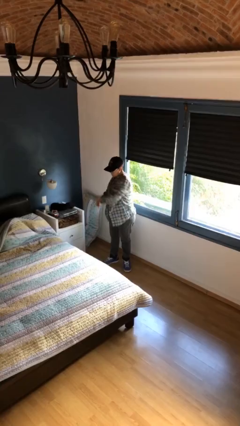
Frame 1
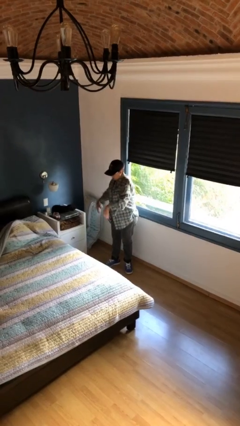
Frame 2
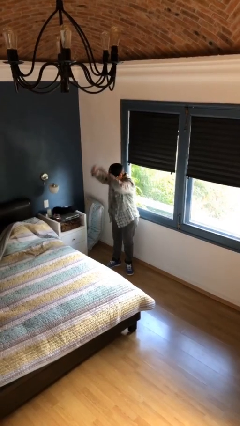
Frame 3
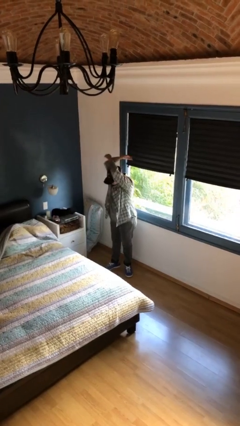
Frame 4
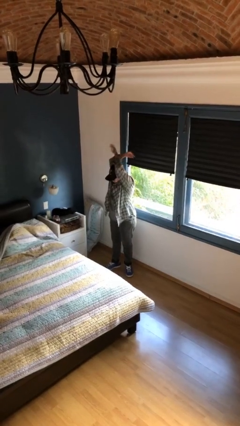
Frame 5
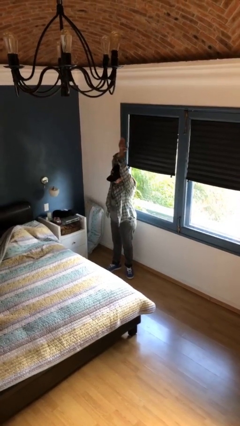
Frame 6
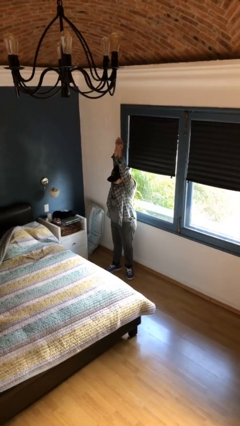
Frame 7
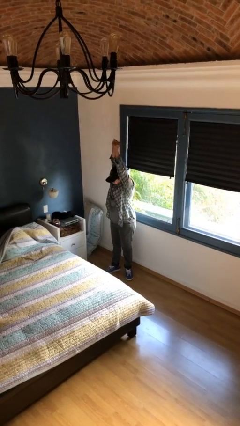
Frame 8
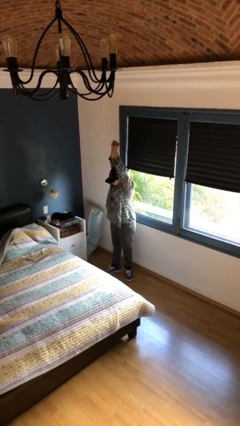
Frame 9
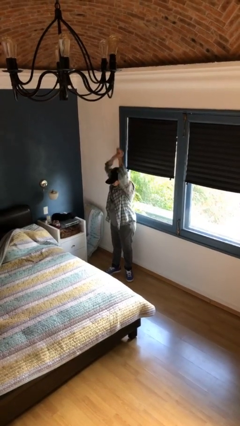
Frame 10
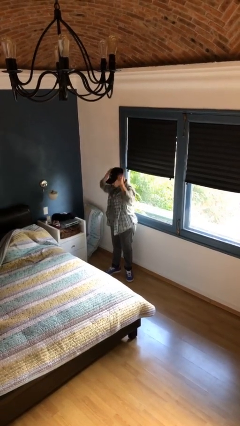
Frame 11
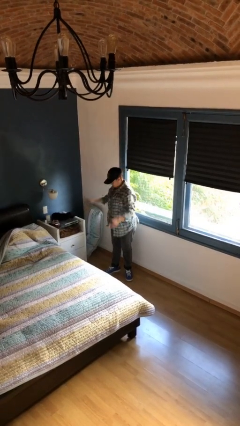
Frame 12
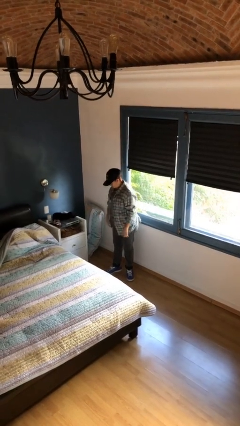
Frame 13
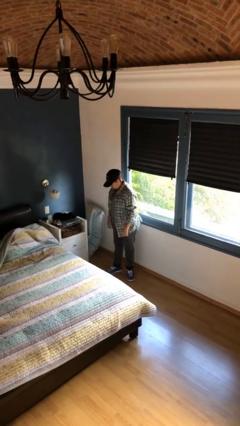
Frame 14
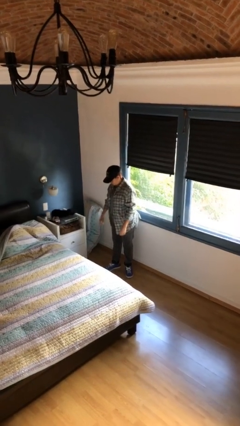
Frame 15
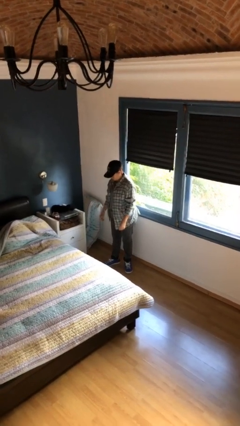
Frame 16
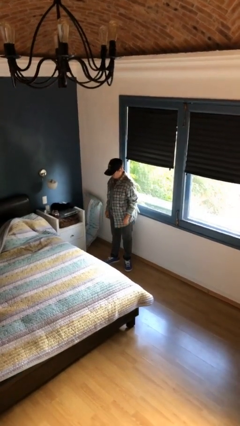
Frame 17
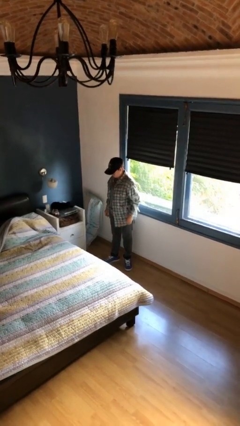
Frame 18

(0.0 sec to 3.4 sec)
person stretches arms over head

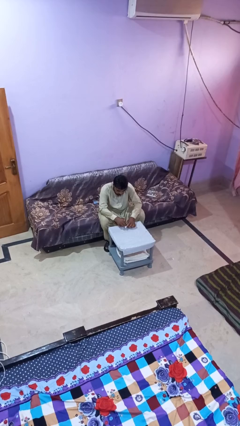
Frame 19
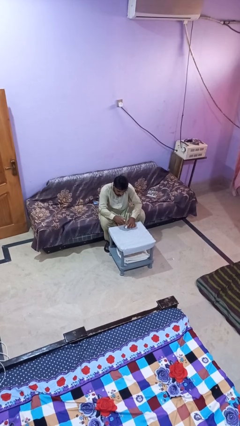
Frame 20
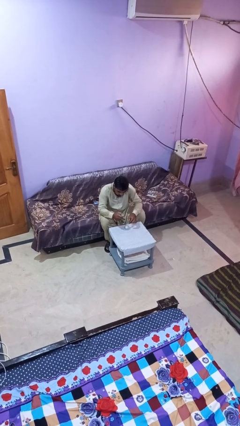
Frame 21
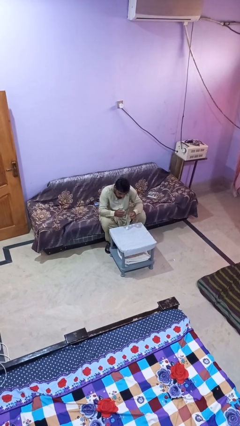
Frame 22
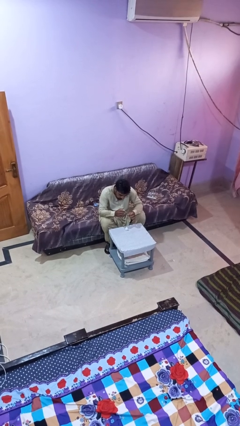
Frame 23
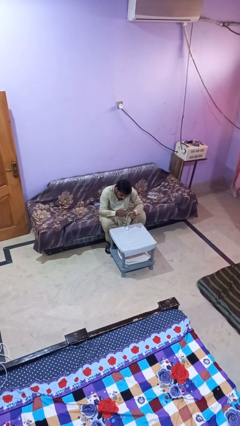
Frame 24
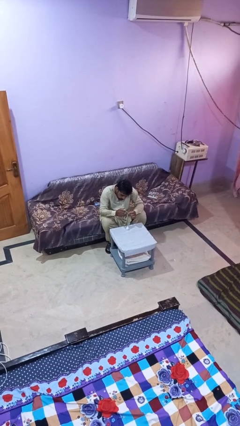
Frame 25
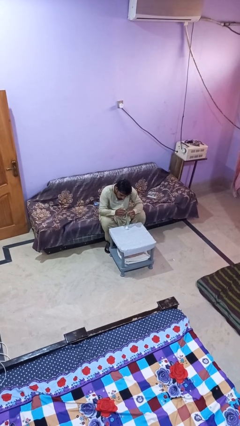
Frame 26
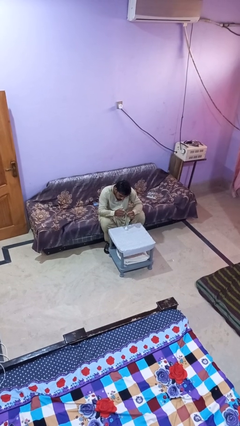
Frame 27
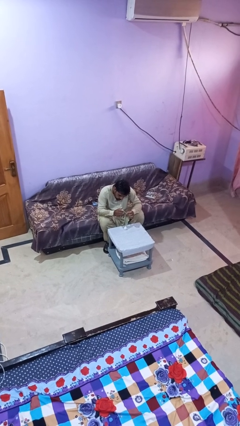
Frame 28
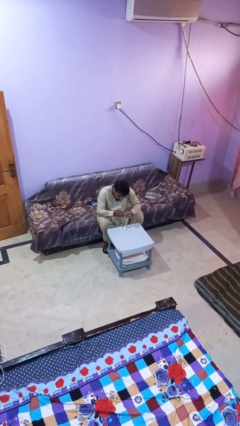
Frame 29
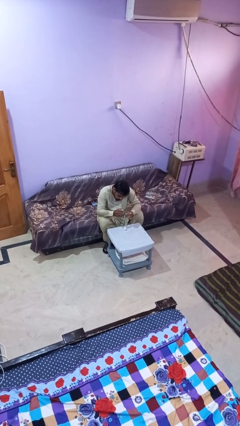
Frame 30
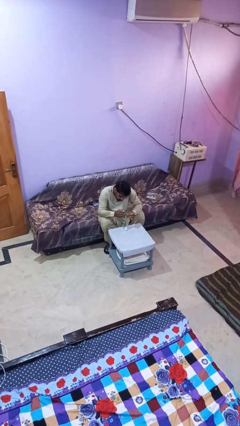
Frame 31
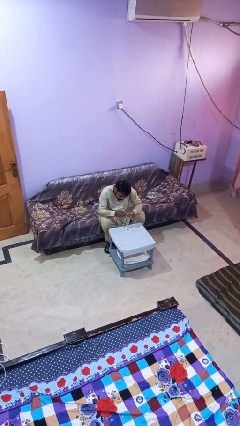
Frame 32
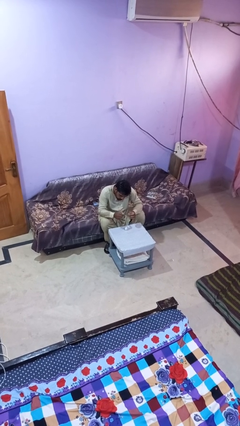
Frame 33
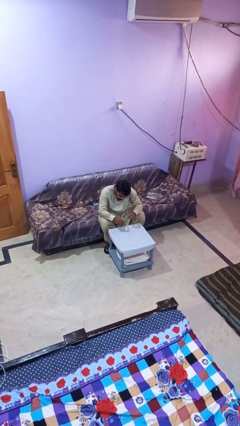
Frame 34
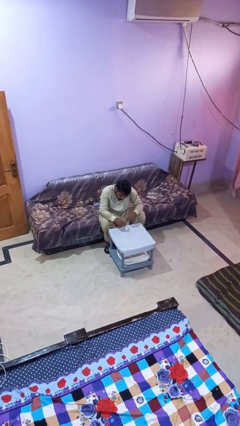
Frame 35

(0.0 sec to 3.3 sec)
person paints fingernails

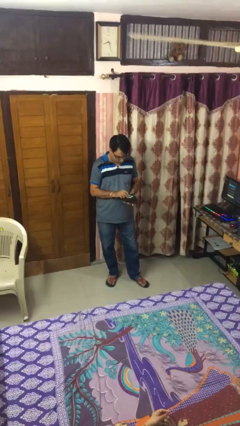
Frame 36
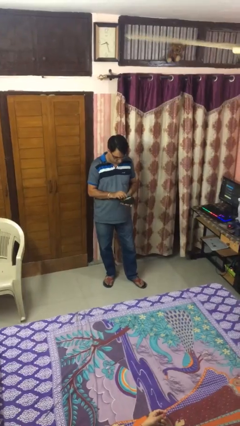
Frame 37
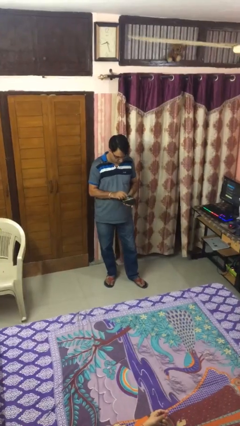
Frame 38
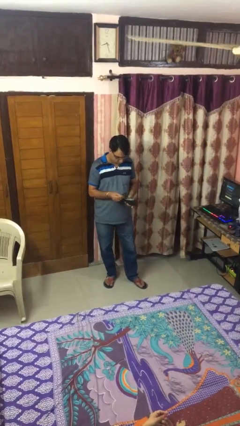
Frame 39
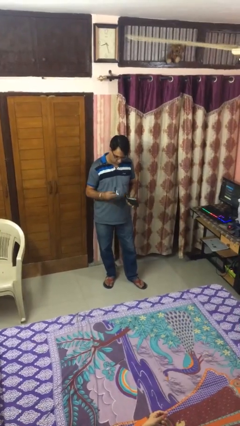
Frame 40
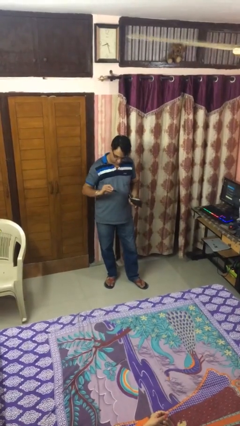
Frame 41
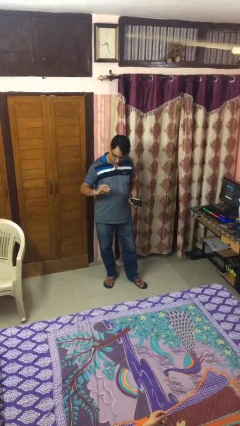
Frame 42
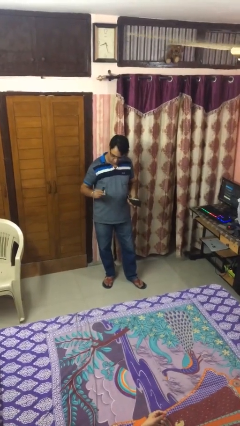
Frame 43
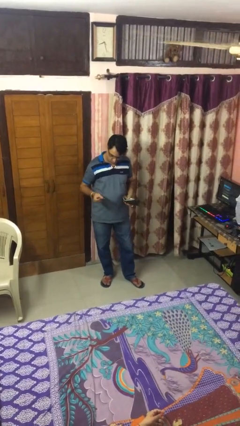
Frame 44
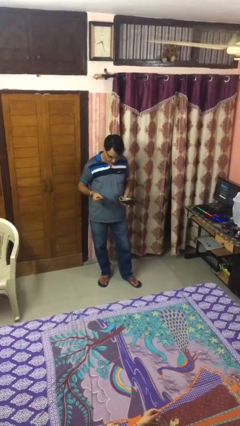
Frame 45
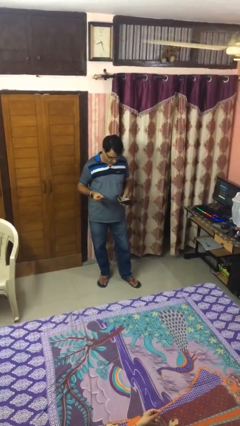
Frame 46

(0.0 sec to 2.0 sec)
person takes object from purse

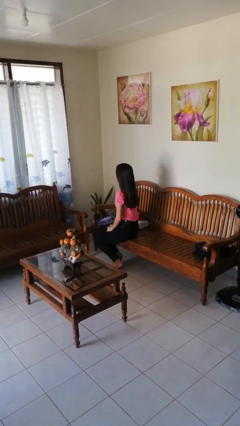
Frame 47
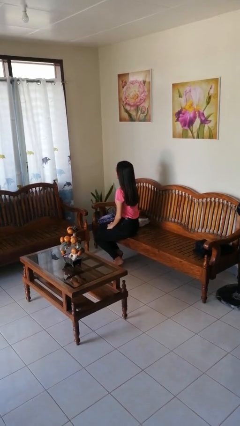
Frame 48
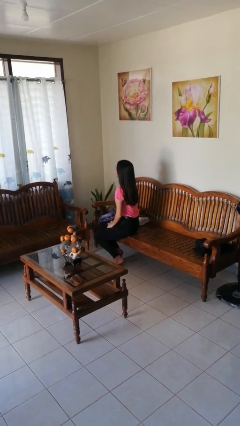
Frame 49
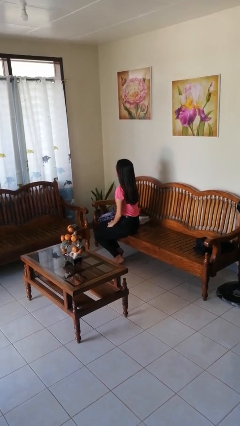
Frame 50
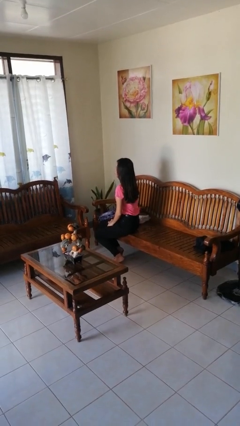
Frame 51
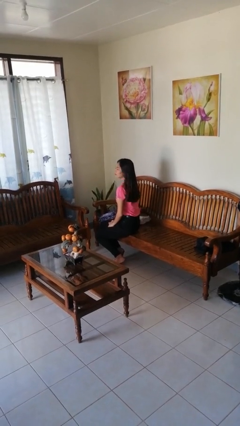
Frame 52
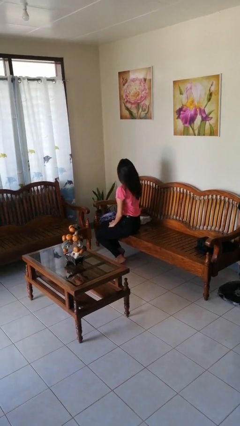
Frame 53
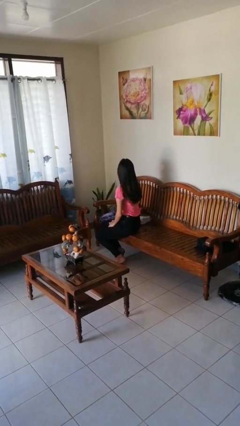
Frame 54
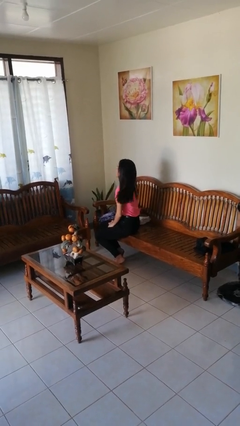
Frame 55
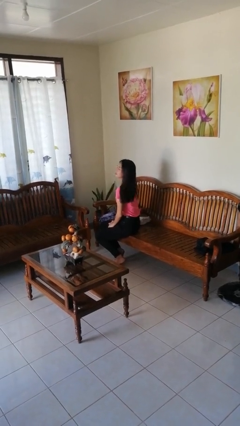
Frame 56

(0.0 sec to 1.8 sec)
person shakes head

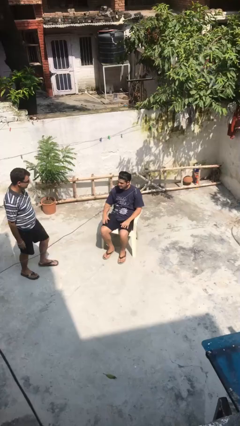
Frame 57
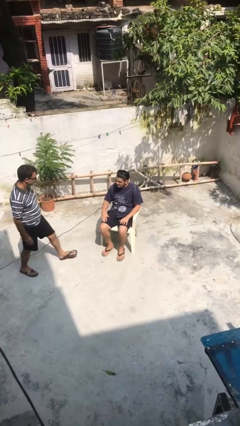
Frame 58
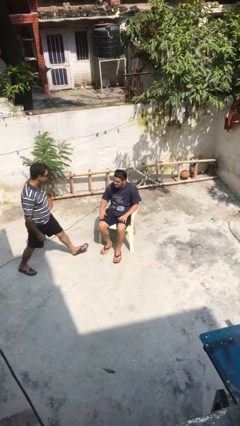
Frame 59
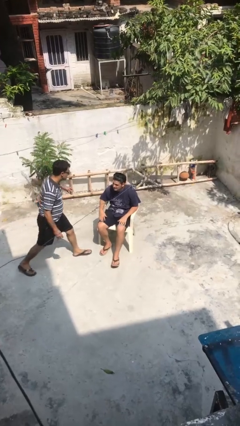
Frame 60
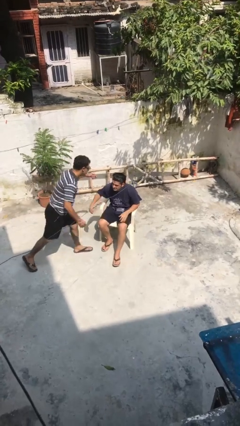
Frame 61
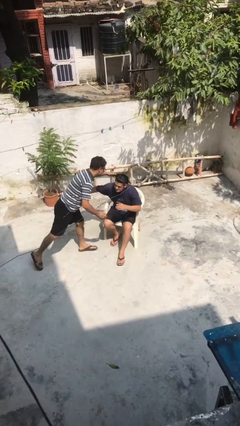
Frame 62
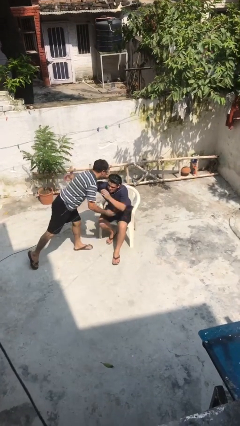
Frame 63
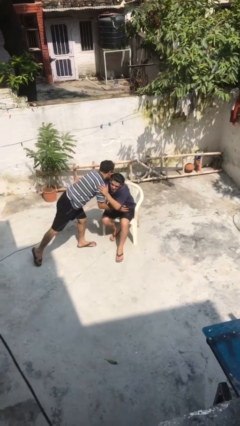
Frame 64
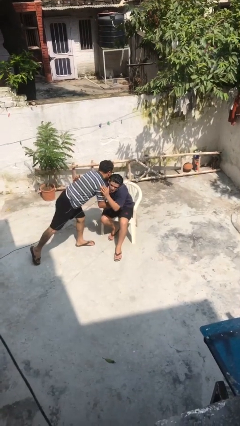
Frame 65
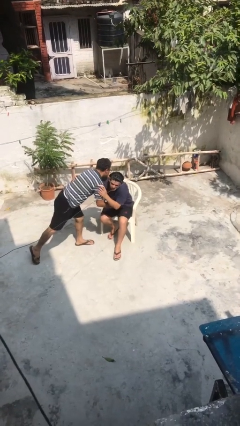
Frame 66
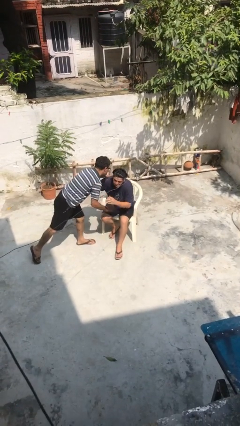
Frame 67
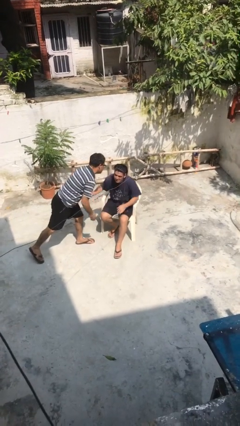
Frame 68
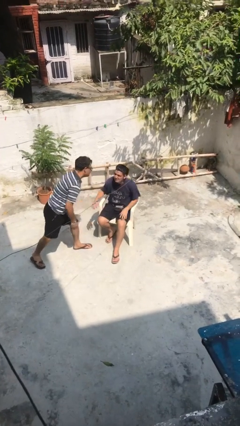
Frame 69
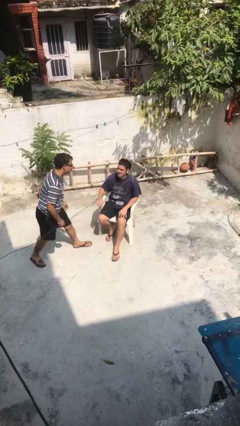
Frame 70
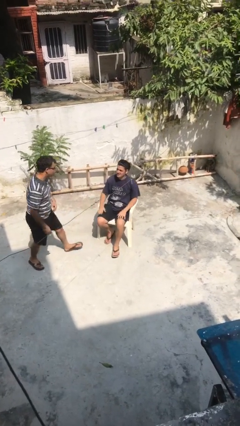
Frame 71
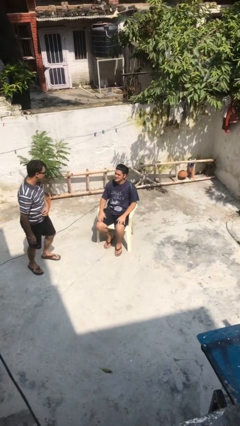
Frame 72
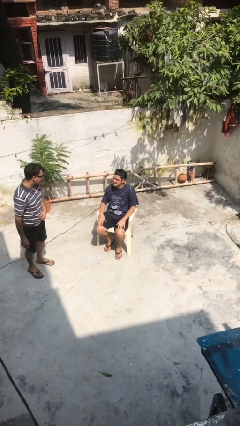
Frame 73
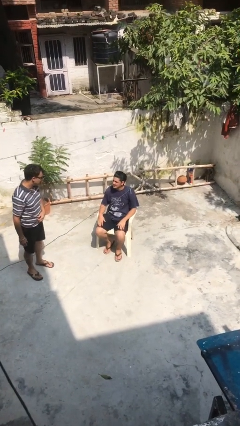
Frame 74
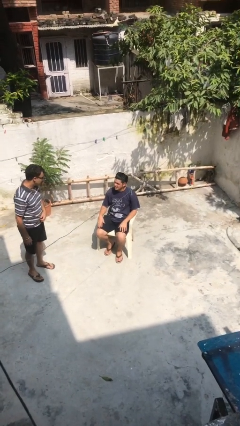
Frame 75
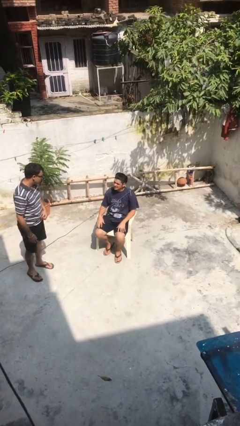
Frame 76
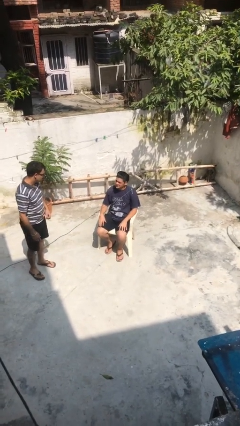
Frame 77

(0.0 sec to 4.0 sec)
person embraces person

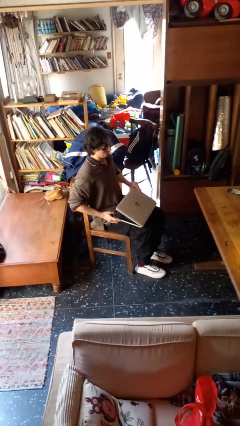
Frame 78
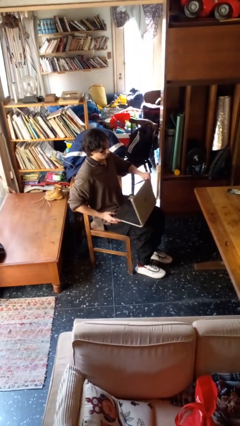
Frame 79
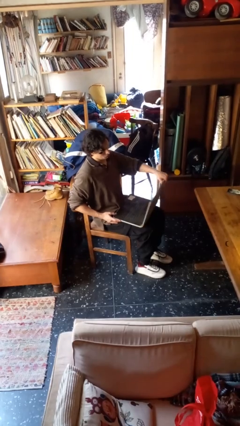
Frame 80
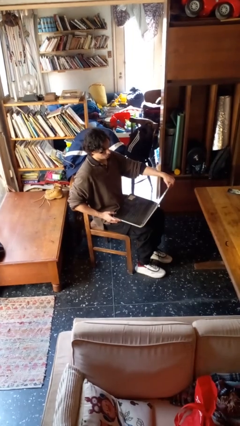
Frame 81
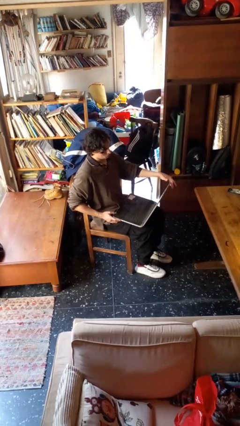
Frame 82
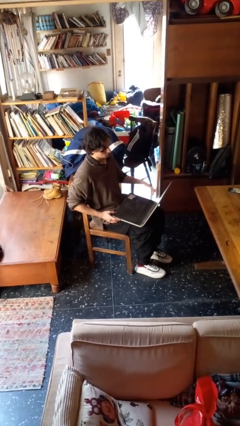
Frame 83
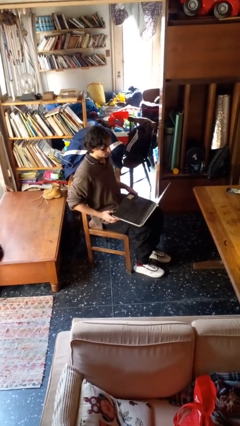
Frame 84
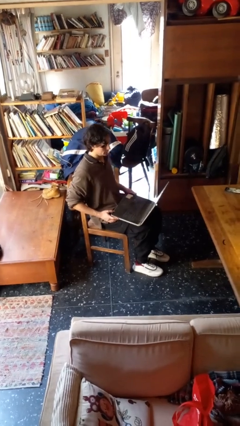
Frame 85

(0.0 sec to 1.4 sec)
person opens laptop

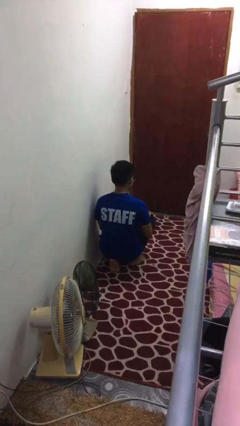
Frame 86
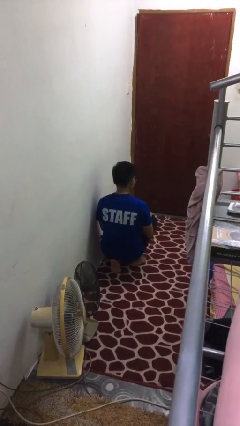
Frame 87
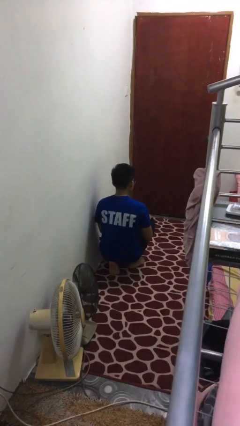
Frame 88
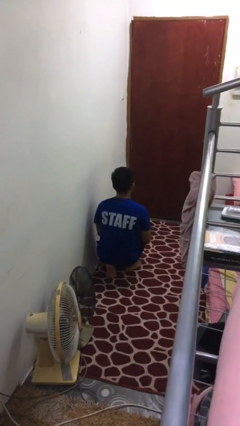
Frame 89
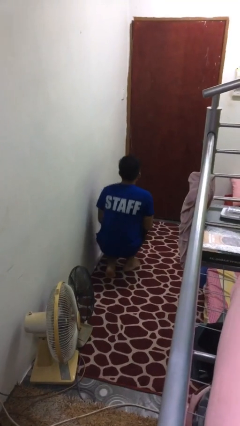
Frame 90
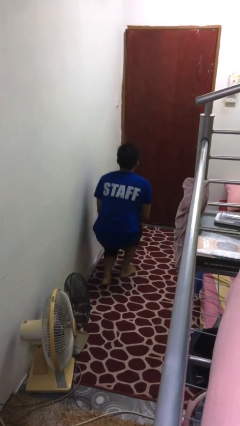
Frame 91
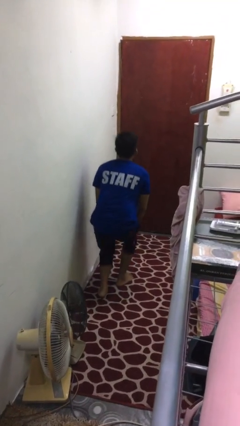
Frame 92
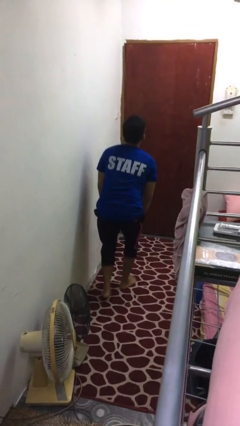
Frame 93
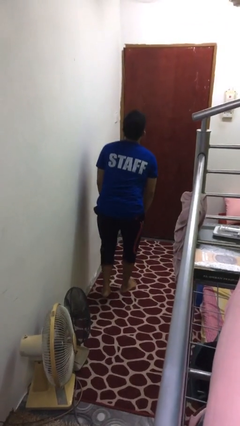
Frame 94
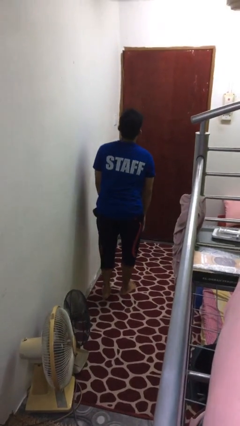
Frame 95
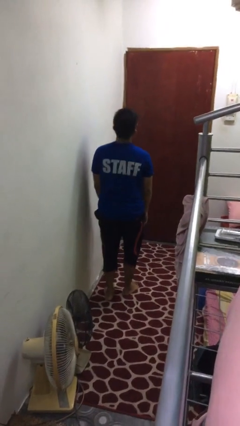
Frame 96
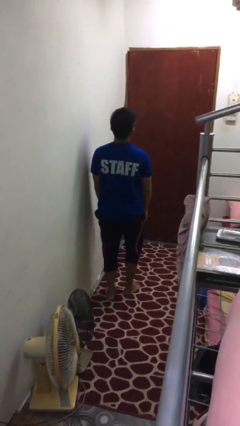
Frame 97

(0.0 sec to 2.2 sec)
person stands up from floor
